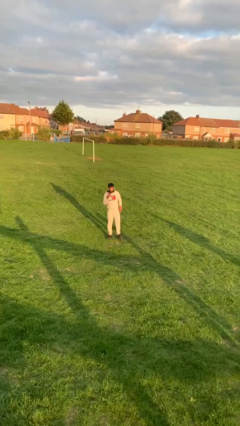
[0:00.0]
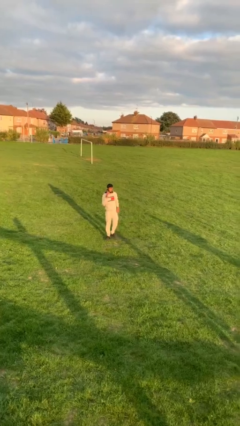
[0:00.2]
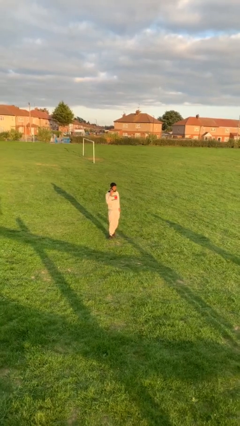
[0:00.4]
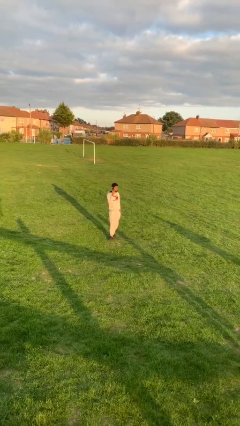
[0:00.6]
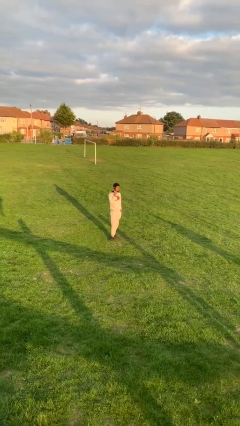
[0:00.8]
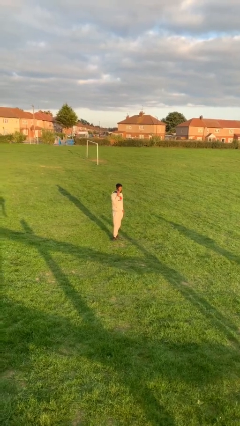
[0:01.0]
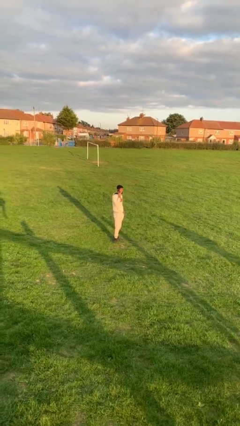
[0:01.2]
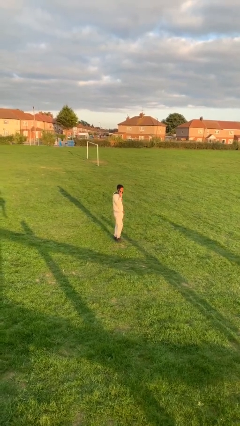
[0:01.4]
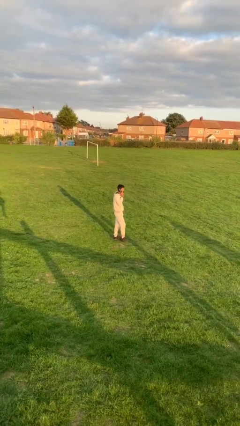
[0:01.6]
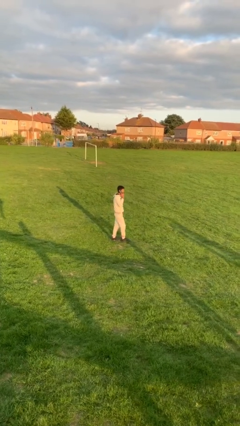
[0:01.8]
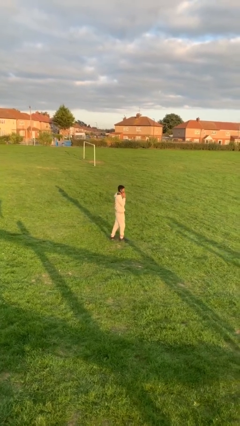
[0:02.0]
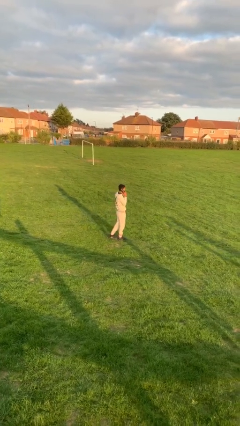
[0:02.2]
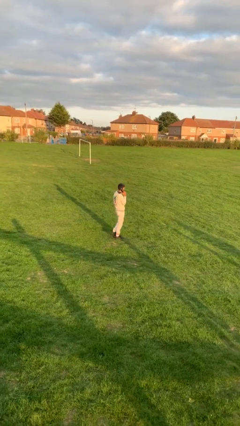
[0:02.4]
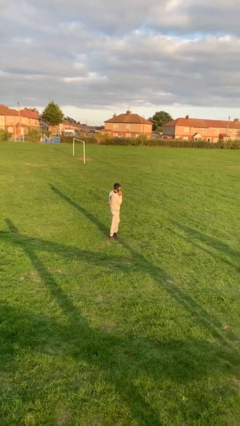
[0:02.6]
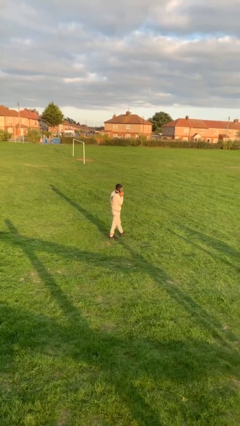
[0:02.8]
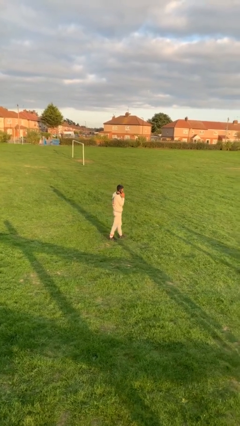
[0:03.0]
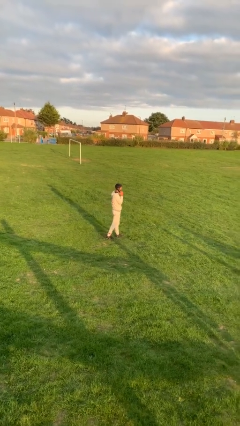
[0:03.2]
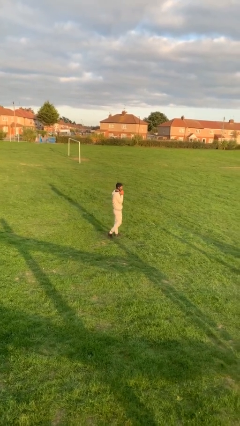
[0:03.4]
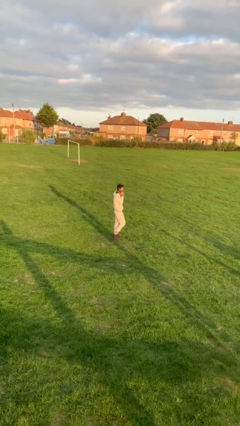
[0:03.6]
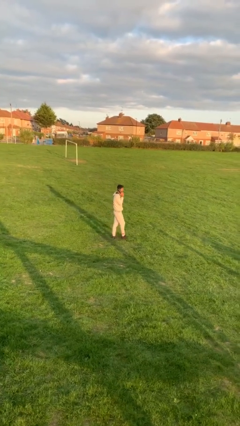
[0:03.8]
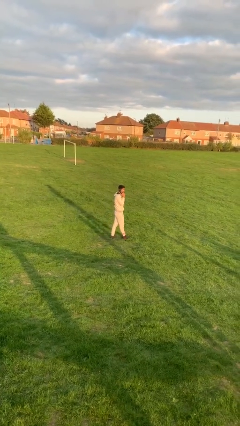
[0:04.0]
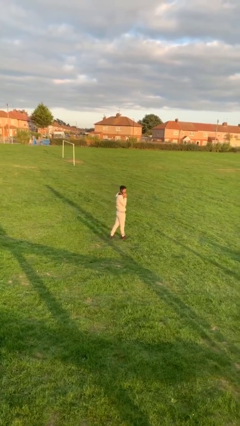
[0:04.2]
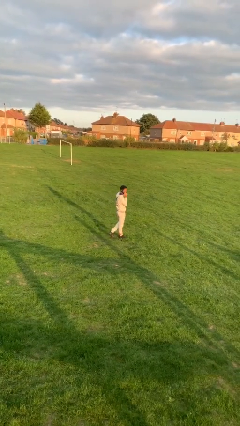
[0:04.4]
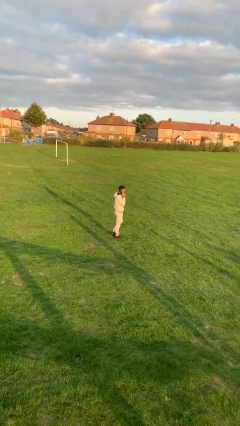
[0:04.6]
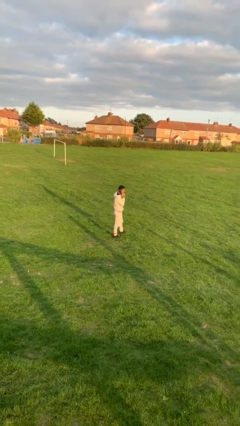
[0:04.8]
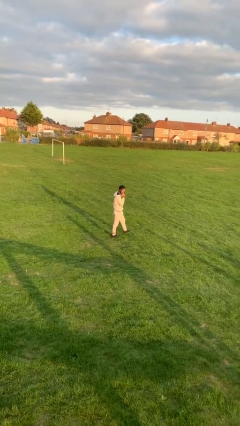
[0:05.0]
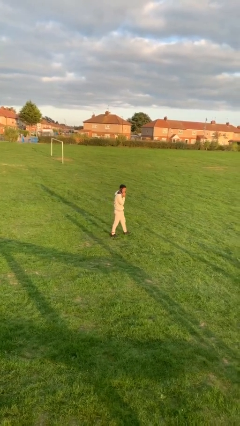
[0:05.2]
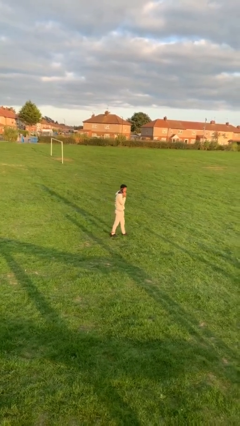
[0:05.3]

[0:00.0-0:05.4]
person talks on phone

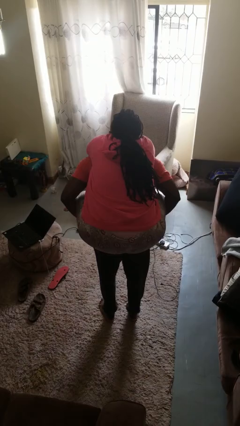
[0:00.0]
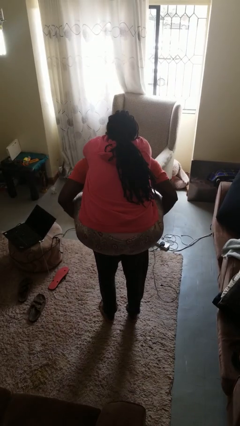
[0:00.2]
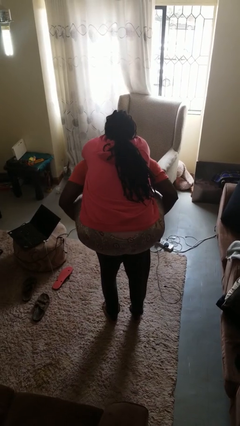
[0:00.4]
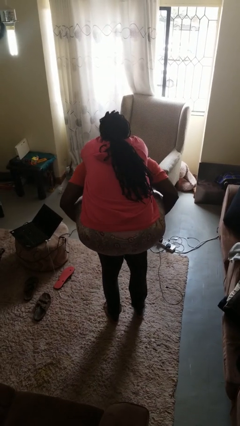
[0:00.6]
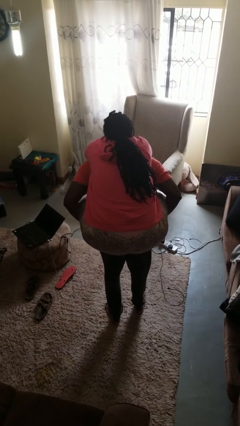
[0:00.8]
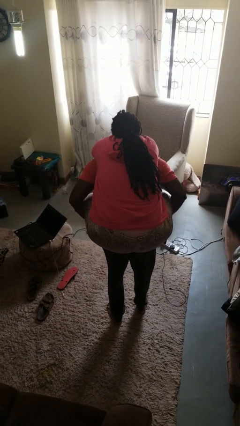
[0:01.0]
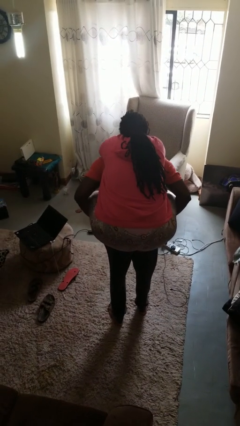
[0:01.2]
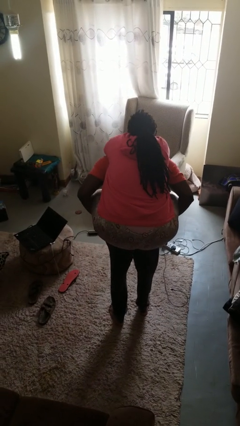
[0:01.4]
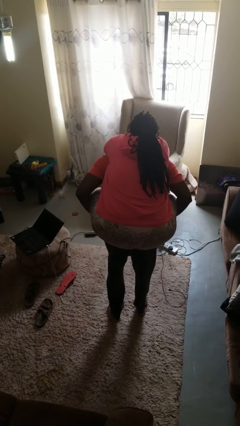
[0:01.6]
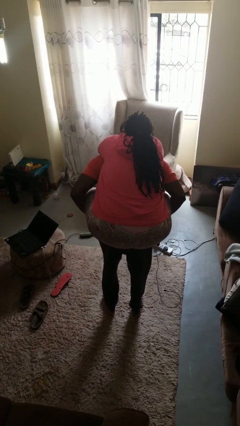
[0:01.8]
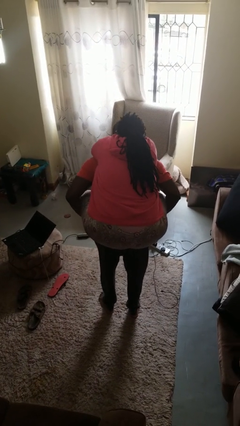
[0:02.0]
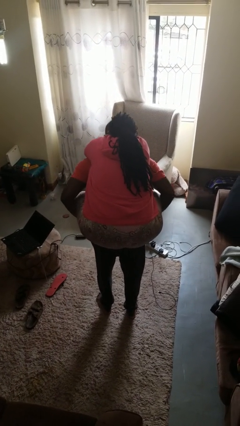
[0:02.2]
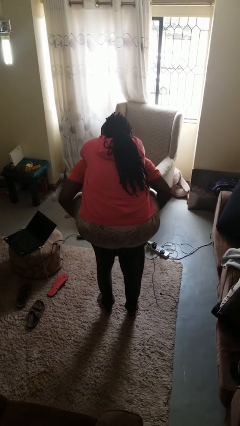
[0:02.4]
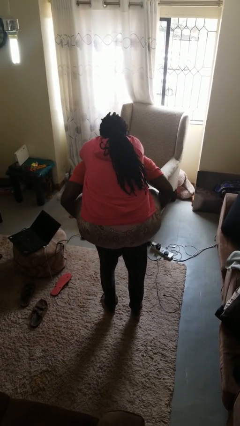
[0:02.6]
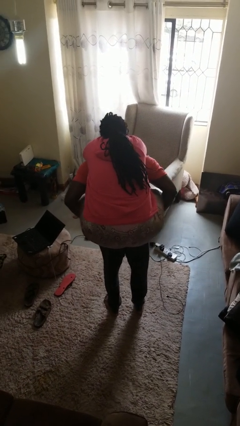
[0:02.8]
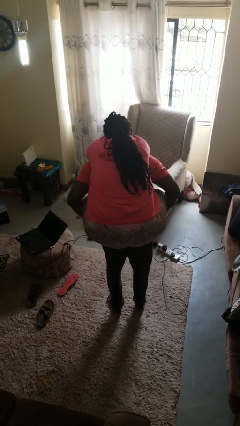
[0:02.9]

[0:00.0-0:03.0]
person carries person on back

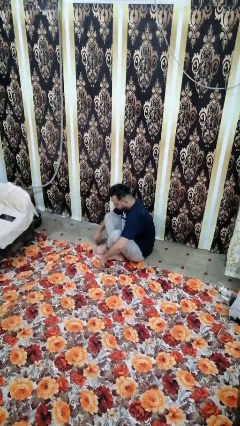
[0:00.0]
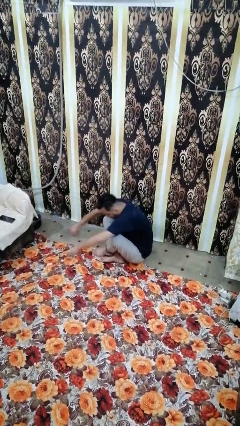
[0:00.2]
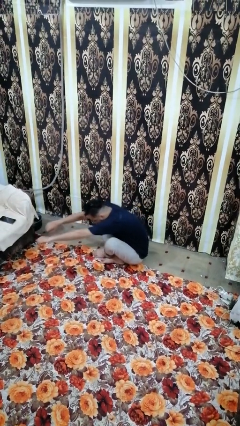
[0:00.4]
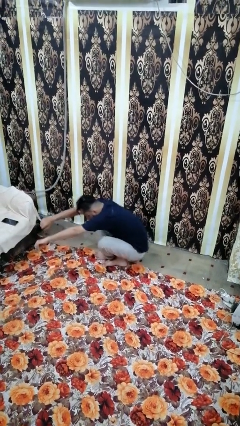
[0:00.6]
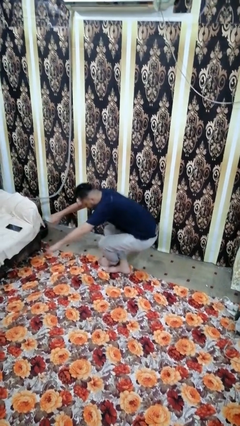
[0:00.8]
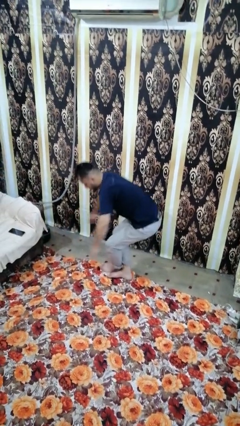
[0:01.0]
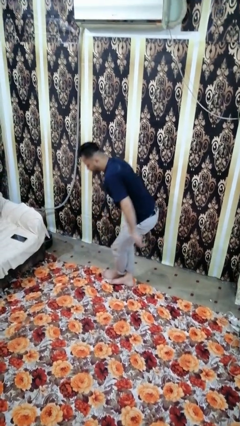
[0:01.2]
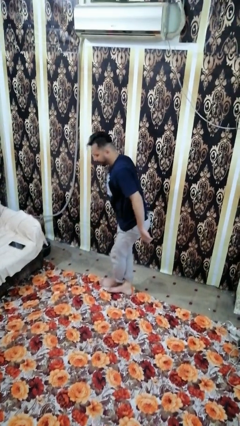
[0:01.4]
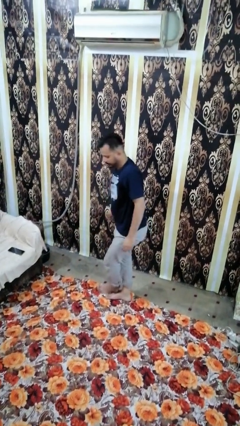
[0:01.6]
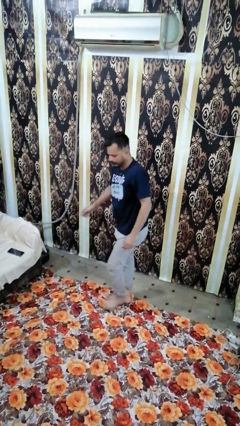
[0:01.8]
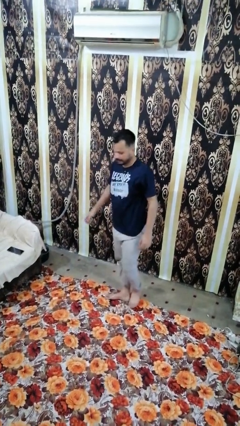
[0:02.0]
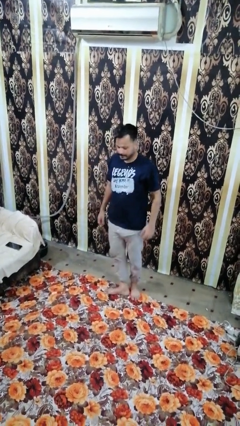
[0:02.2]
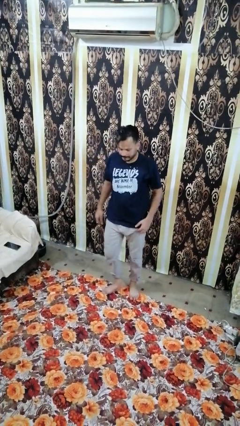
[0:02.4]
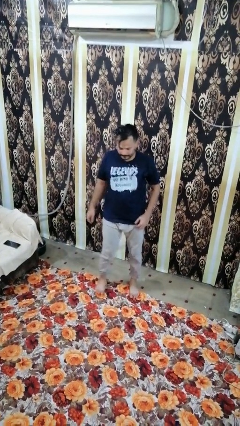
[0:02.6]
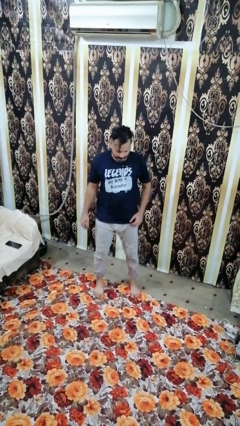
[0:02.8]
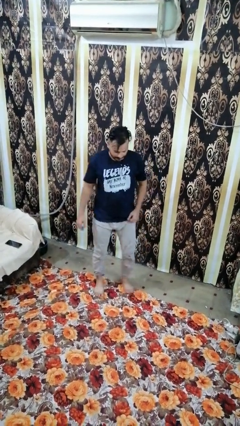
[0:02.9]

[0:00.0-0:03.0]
person stands up from floor

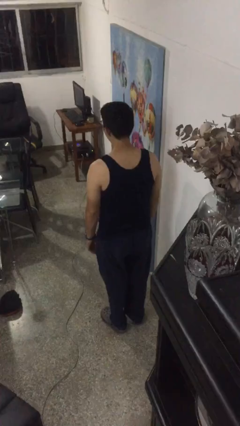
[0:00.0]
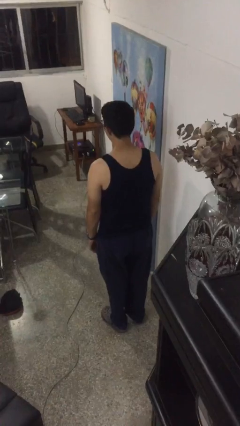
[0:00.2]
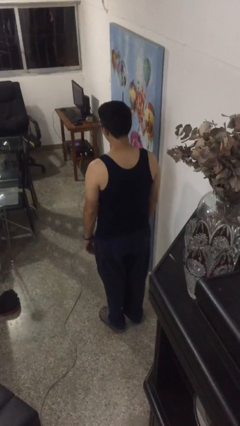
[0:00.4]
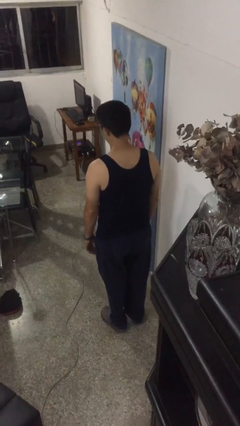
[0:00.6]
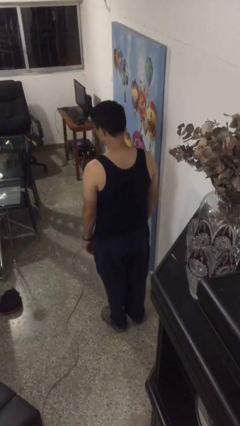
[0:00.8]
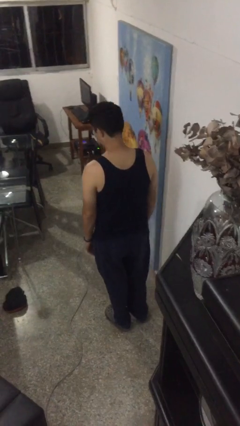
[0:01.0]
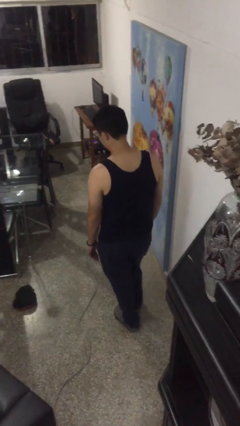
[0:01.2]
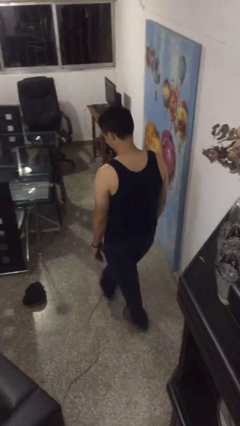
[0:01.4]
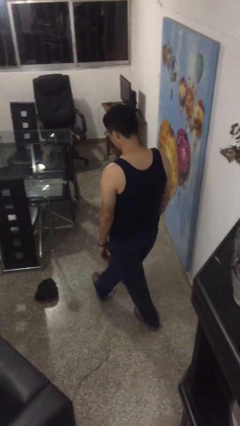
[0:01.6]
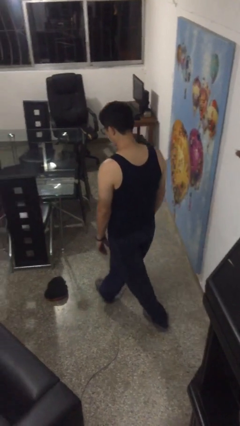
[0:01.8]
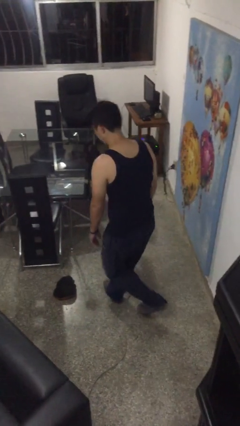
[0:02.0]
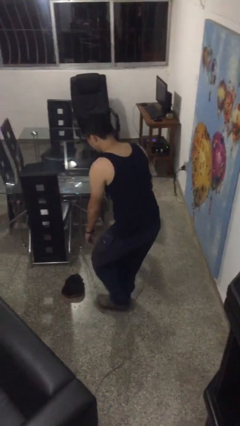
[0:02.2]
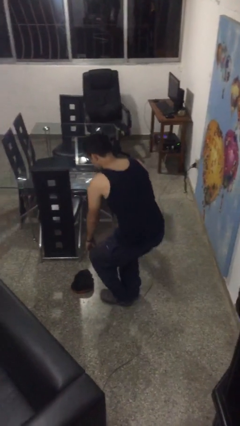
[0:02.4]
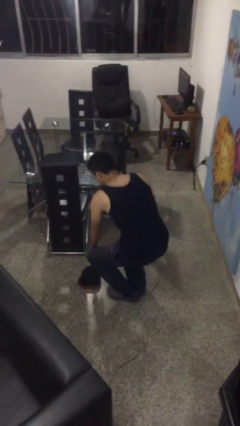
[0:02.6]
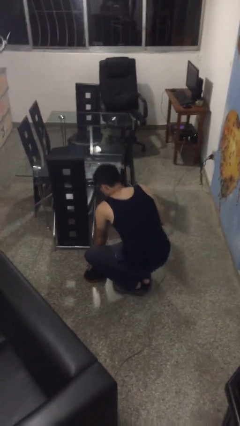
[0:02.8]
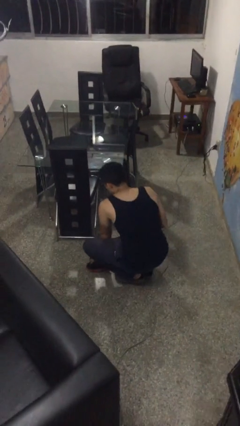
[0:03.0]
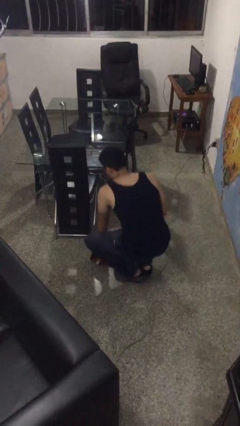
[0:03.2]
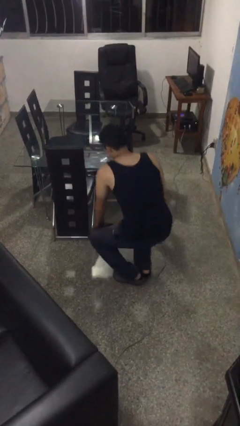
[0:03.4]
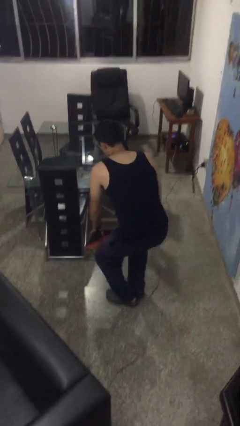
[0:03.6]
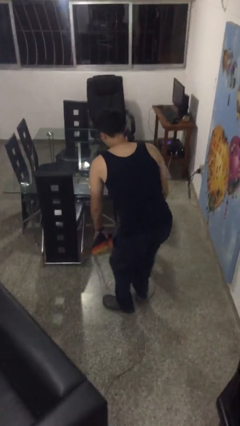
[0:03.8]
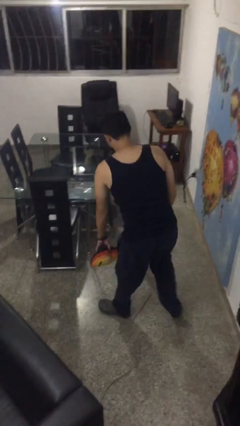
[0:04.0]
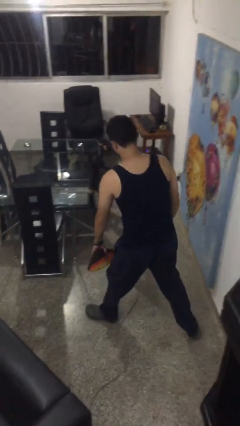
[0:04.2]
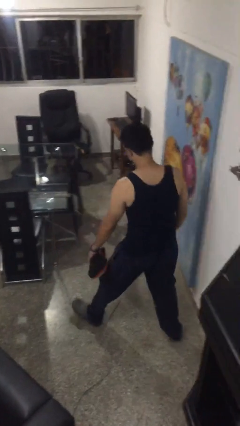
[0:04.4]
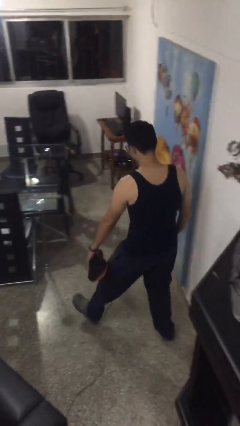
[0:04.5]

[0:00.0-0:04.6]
person picks up object from floor

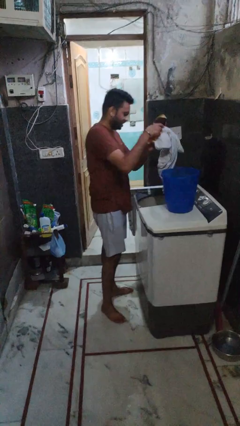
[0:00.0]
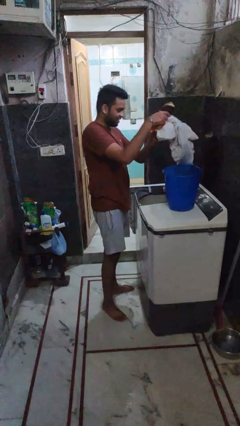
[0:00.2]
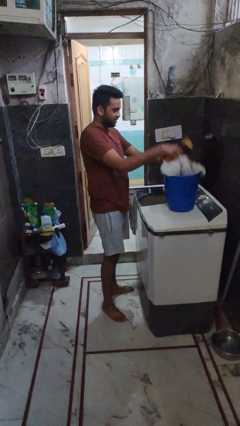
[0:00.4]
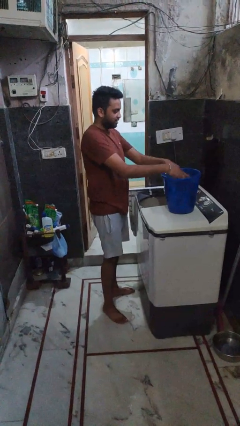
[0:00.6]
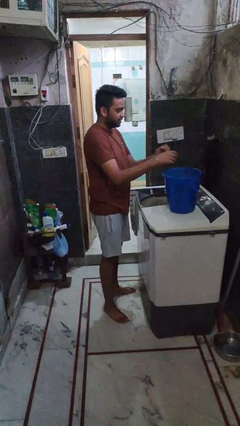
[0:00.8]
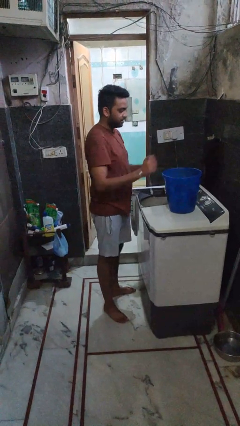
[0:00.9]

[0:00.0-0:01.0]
person unloads clotheswasher

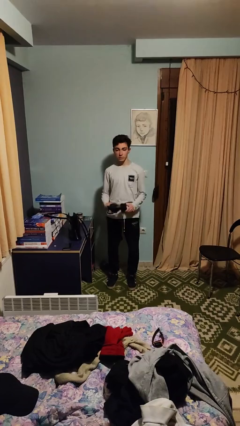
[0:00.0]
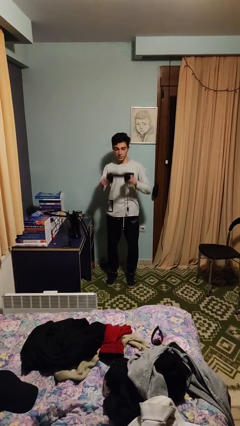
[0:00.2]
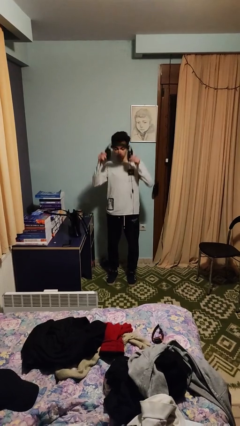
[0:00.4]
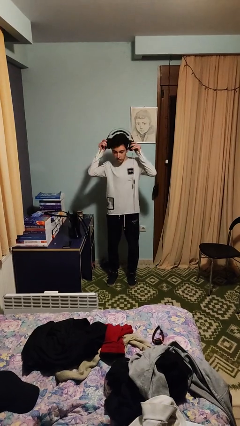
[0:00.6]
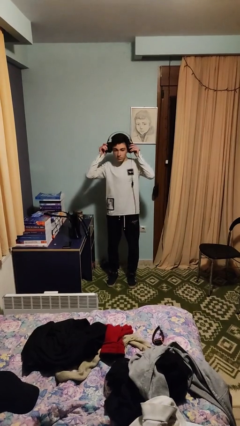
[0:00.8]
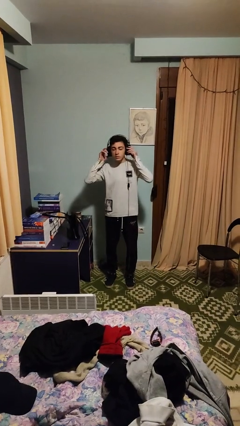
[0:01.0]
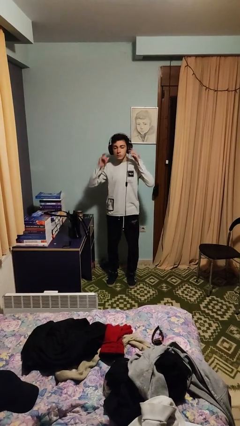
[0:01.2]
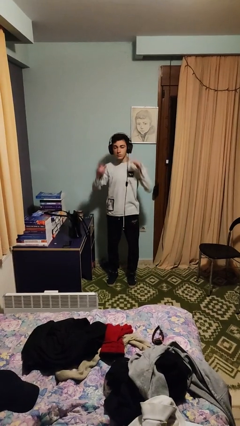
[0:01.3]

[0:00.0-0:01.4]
person puts on headphones
